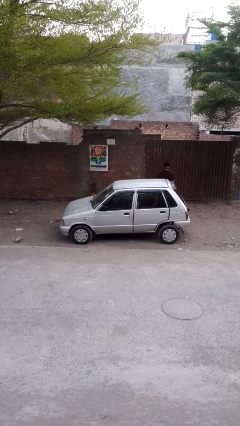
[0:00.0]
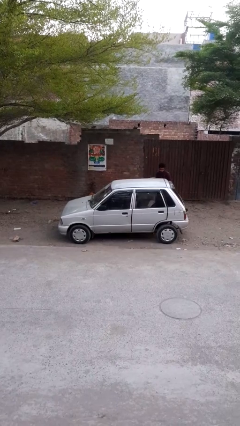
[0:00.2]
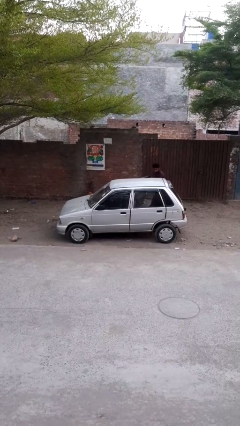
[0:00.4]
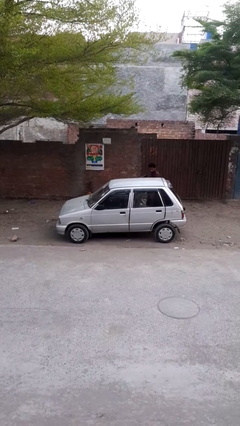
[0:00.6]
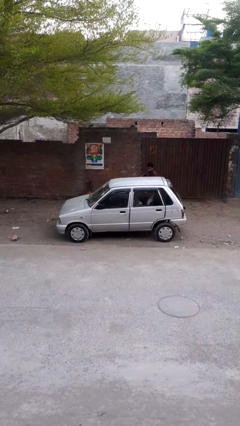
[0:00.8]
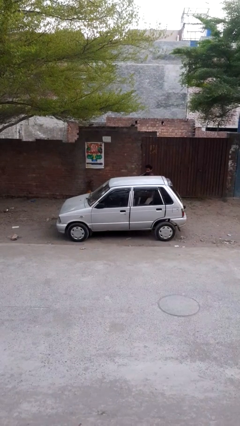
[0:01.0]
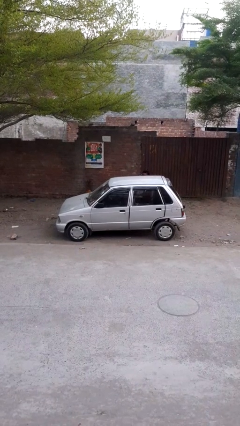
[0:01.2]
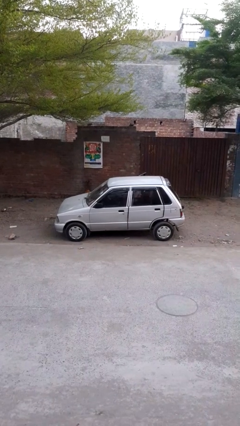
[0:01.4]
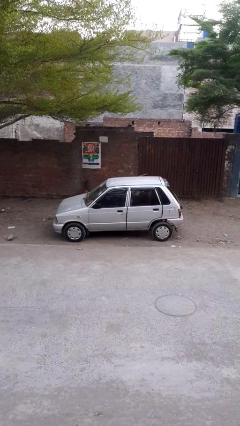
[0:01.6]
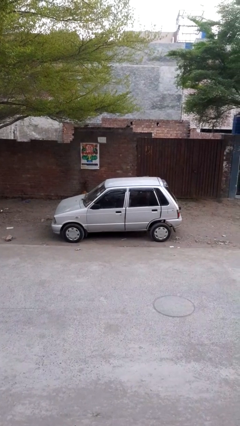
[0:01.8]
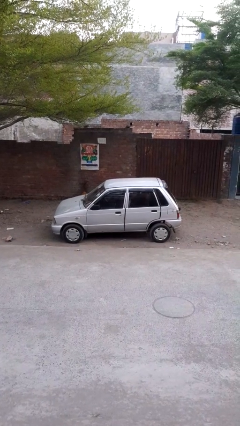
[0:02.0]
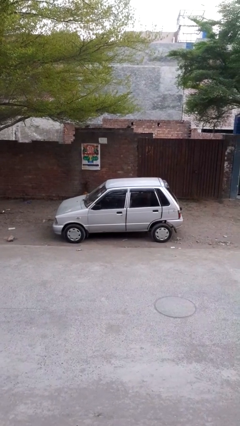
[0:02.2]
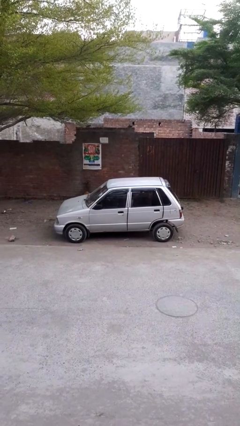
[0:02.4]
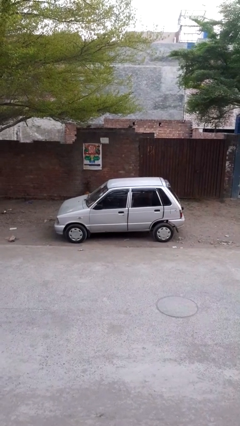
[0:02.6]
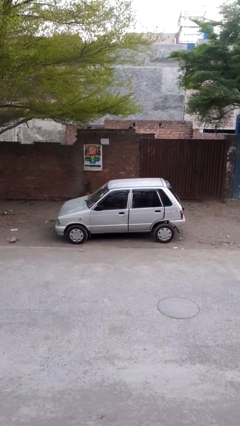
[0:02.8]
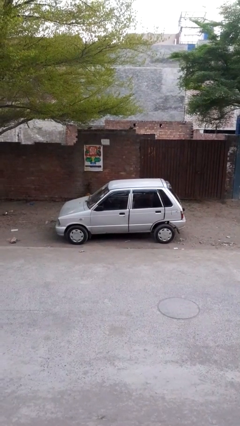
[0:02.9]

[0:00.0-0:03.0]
car picks up person

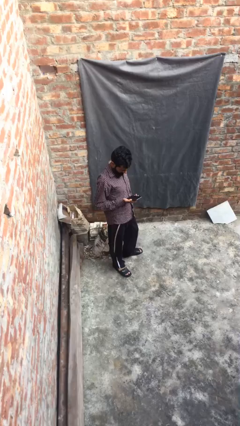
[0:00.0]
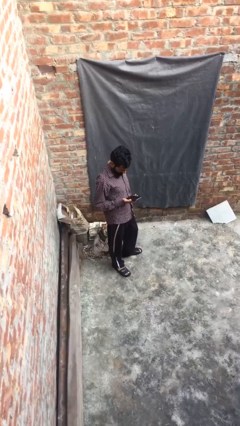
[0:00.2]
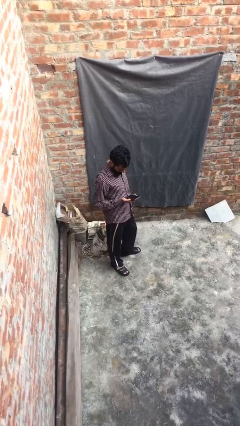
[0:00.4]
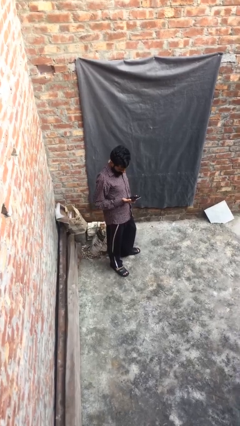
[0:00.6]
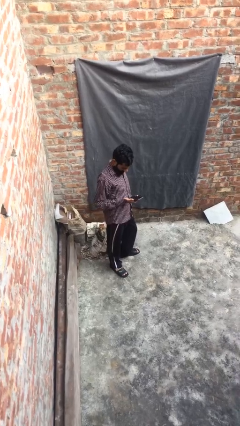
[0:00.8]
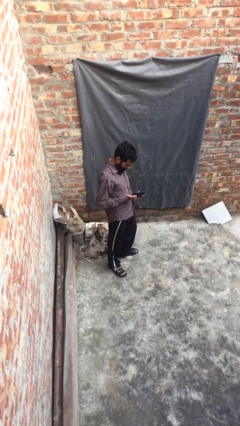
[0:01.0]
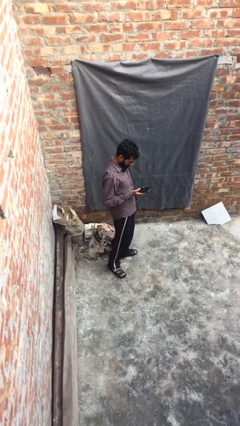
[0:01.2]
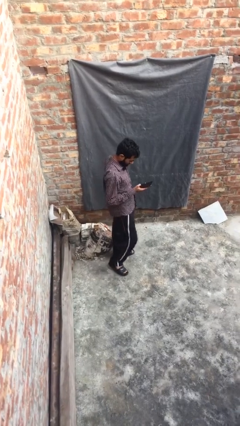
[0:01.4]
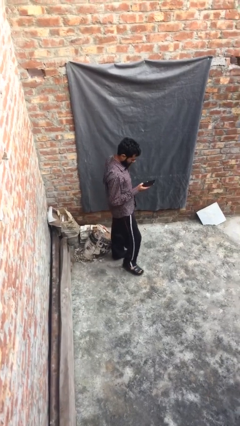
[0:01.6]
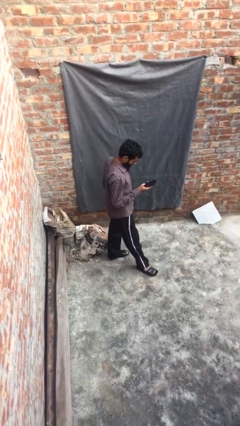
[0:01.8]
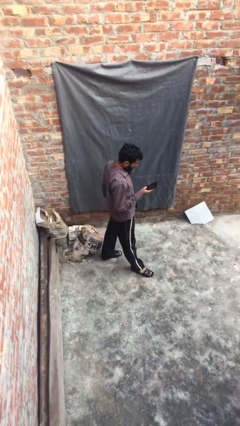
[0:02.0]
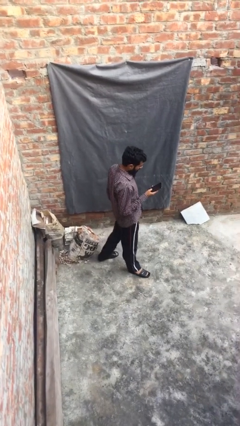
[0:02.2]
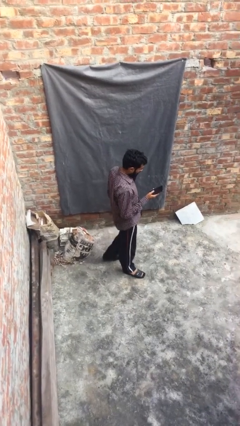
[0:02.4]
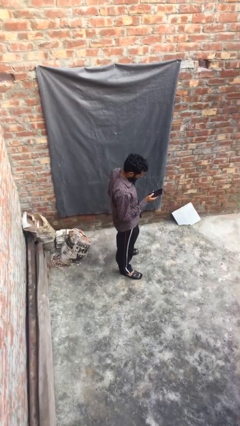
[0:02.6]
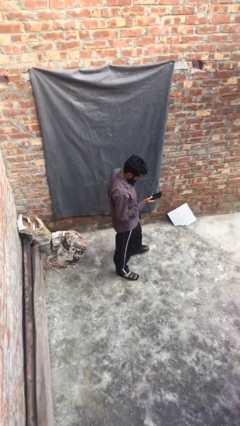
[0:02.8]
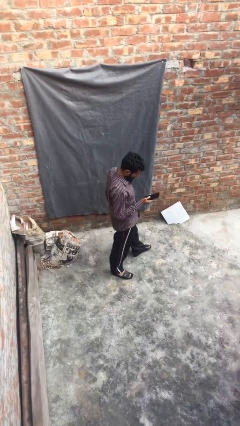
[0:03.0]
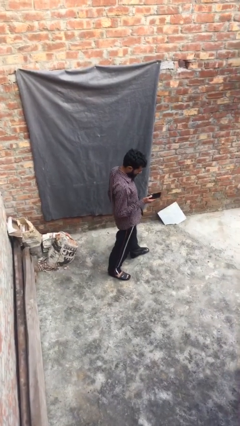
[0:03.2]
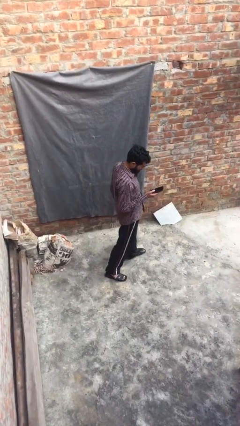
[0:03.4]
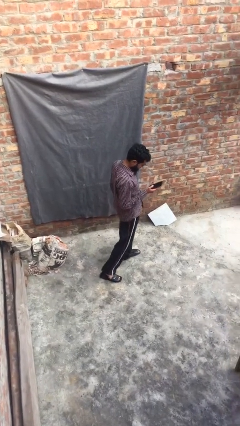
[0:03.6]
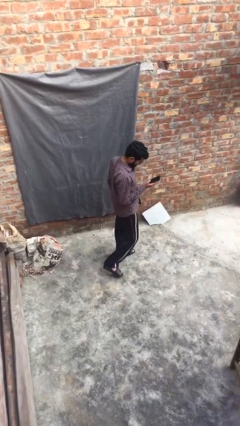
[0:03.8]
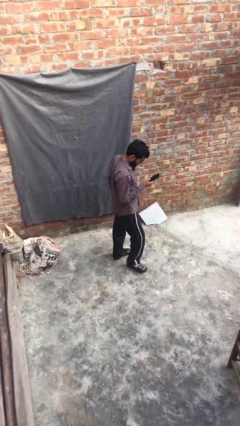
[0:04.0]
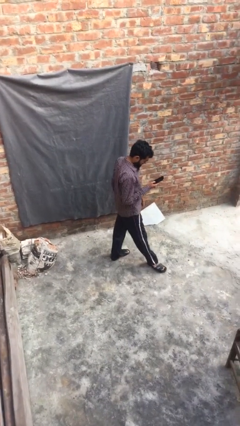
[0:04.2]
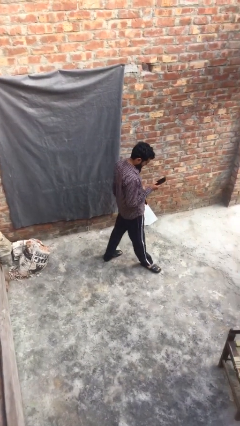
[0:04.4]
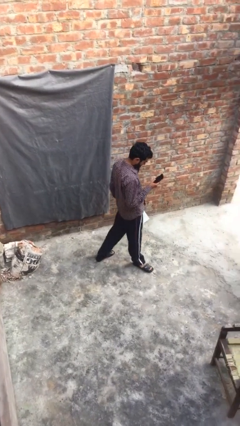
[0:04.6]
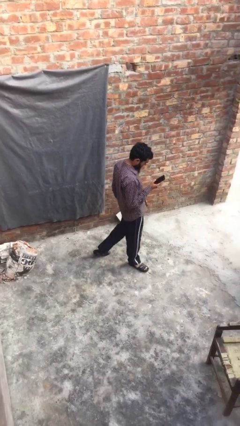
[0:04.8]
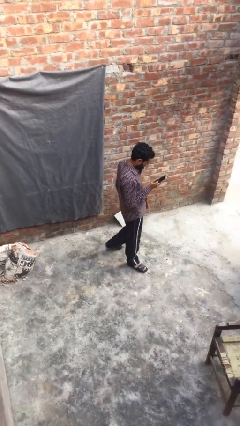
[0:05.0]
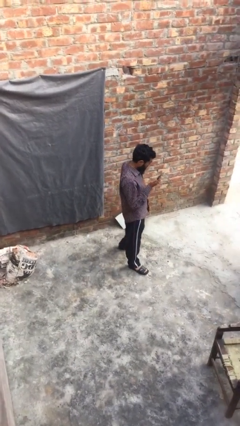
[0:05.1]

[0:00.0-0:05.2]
person texts on phone

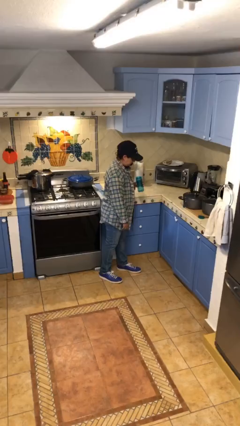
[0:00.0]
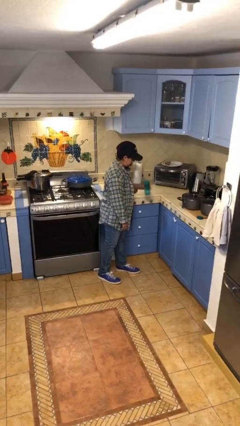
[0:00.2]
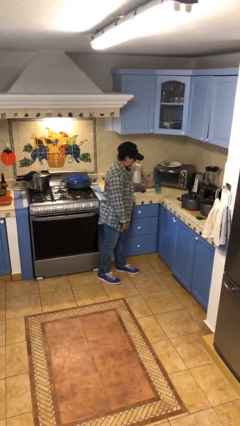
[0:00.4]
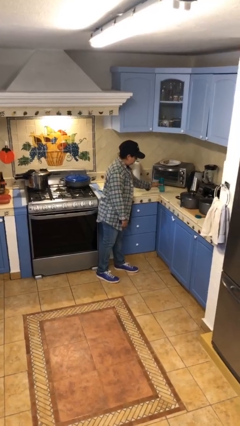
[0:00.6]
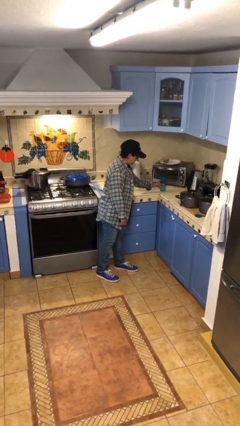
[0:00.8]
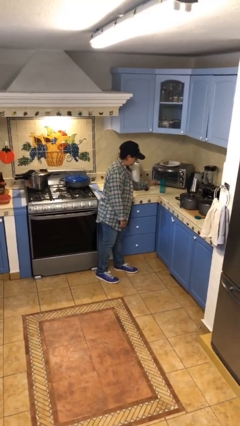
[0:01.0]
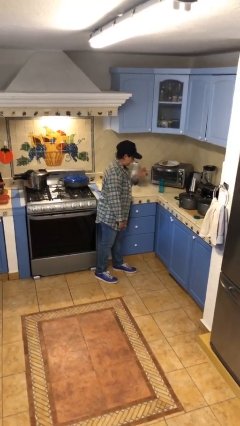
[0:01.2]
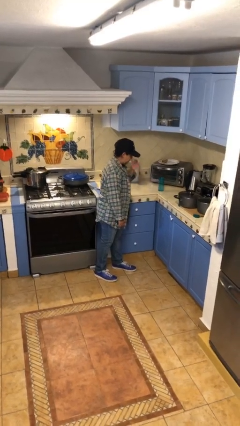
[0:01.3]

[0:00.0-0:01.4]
person puts down object on countertop

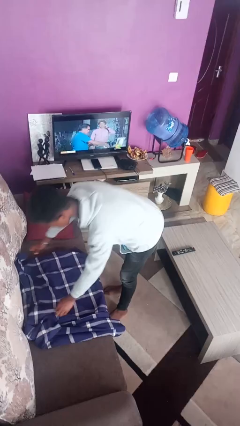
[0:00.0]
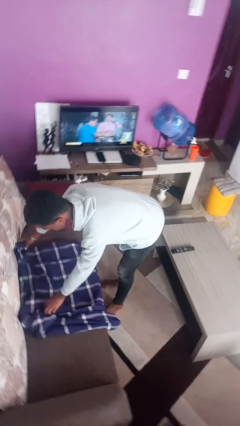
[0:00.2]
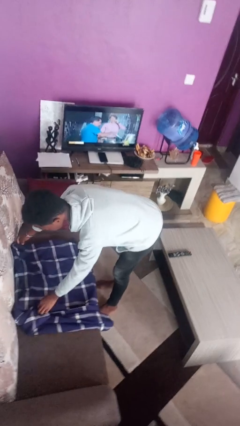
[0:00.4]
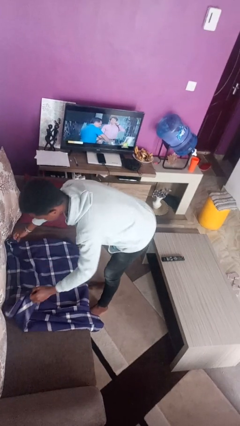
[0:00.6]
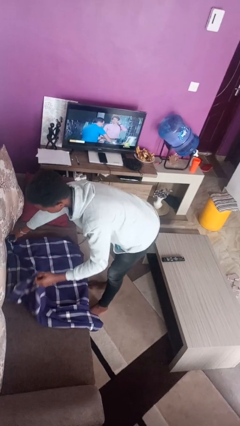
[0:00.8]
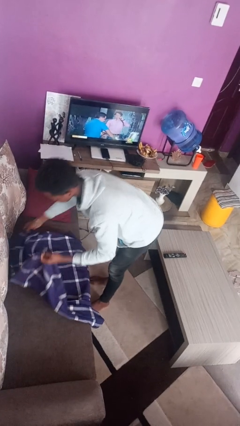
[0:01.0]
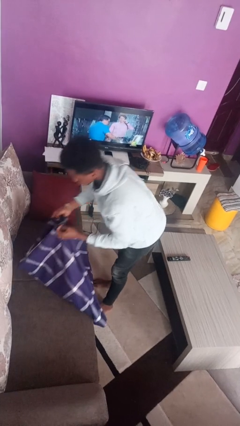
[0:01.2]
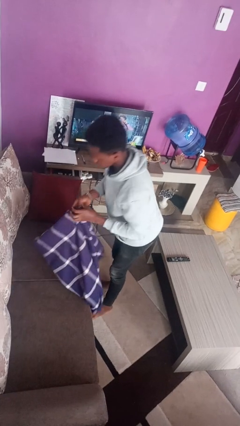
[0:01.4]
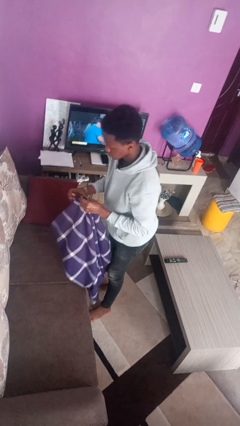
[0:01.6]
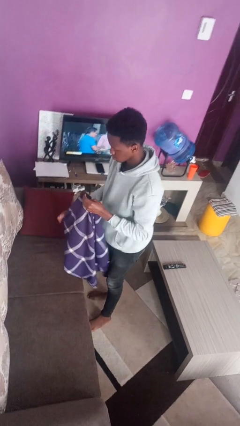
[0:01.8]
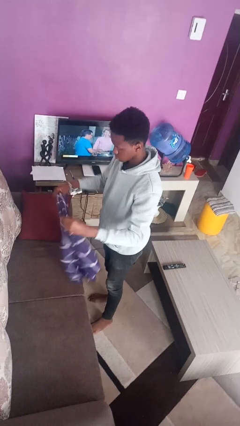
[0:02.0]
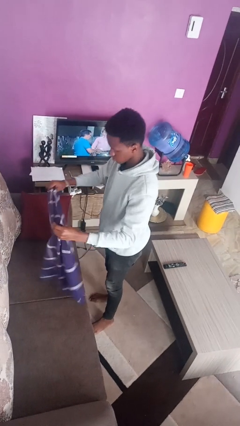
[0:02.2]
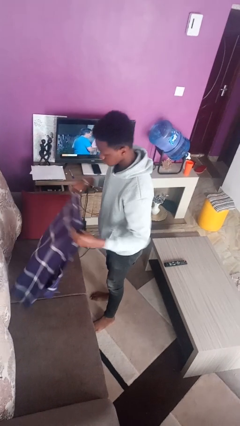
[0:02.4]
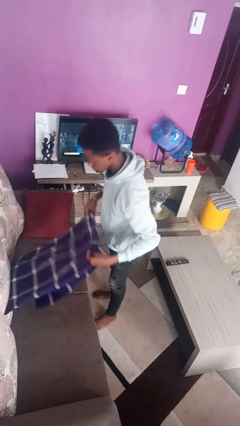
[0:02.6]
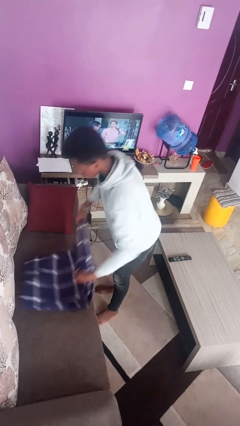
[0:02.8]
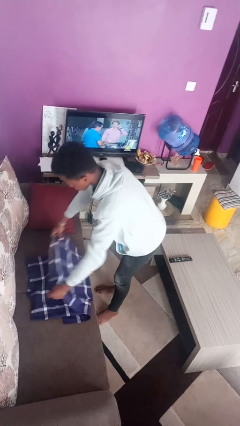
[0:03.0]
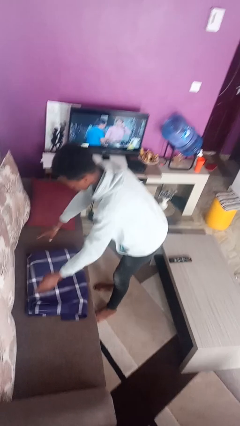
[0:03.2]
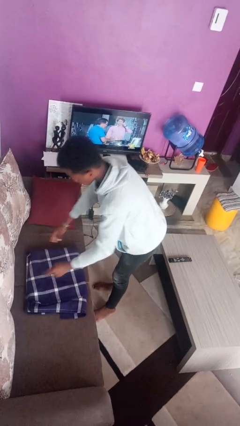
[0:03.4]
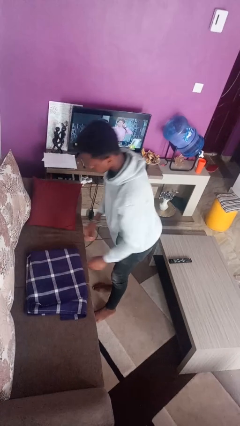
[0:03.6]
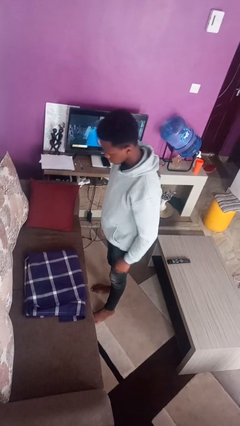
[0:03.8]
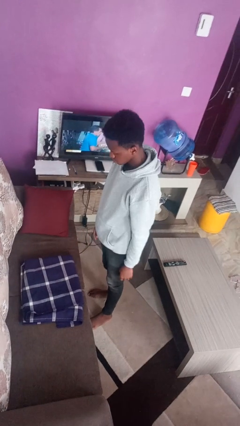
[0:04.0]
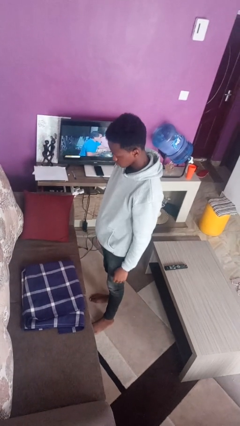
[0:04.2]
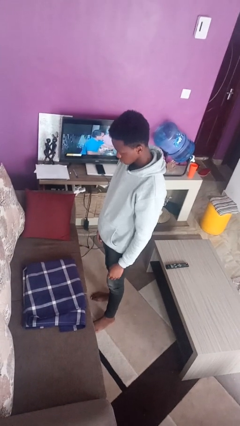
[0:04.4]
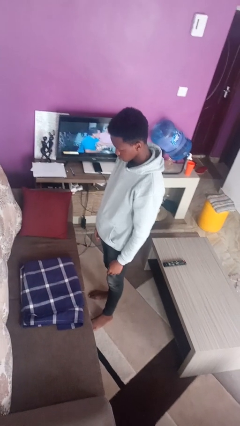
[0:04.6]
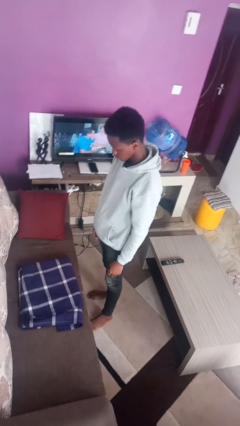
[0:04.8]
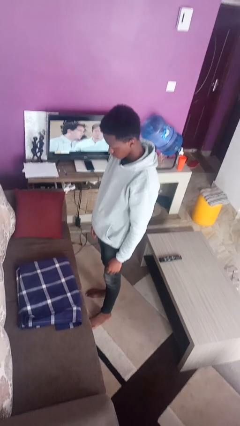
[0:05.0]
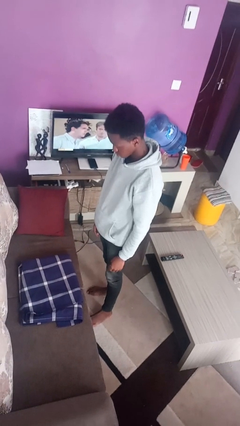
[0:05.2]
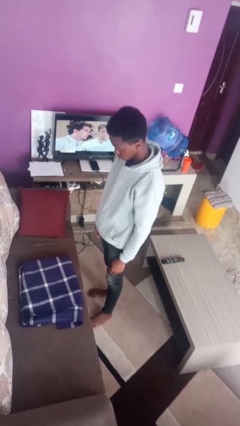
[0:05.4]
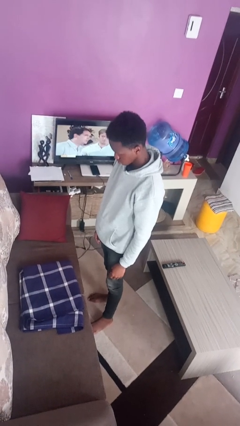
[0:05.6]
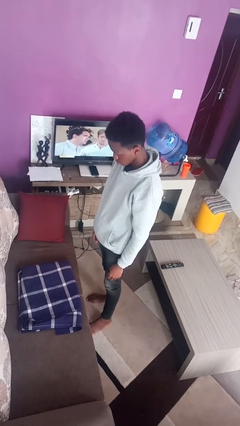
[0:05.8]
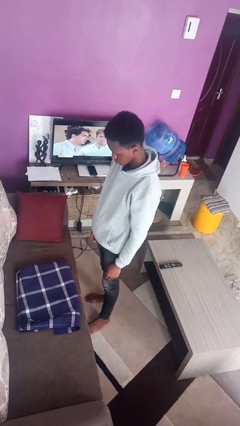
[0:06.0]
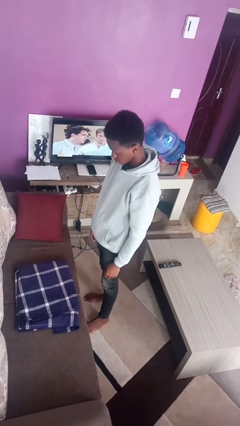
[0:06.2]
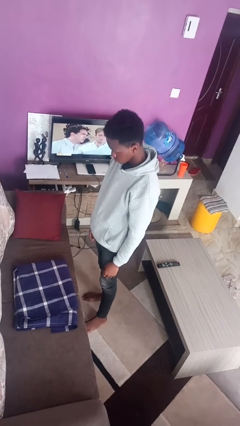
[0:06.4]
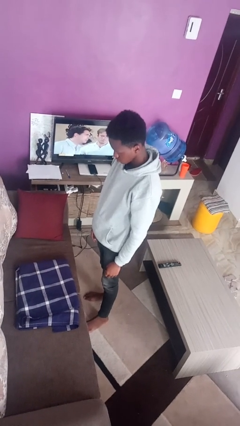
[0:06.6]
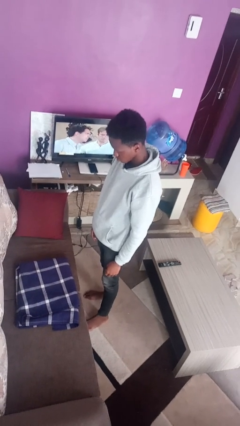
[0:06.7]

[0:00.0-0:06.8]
person folds blanket

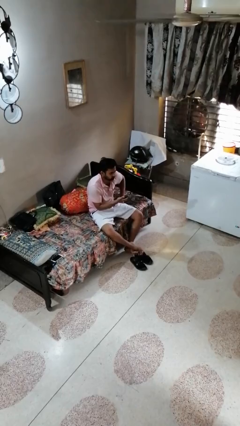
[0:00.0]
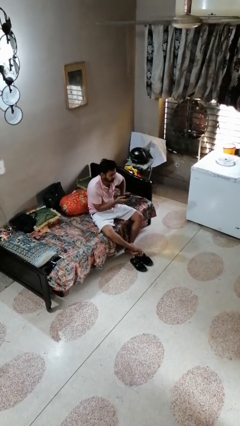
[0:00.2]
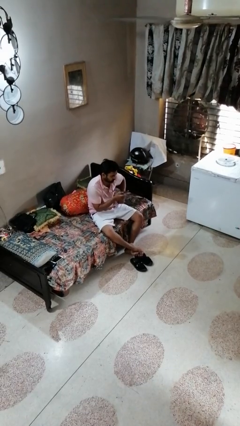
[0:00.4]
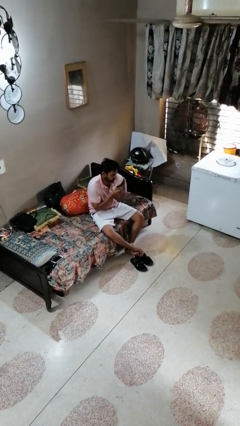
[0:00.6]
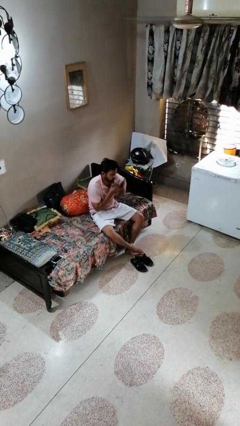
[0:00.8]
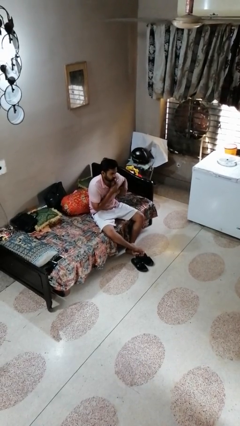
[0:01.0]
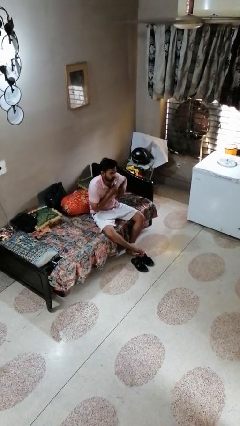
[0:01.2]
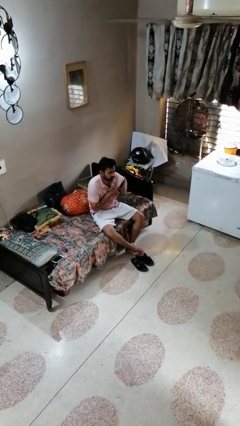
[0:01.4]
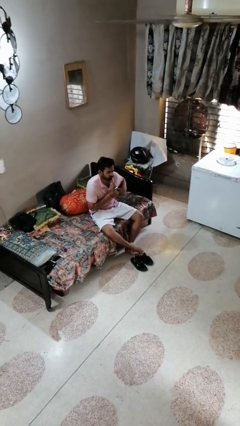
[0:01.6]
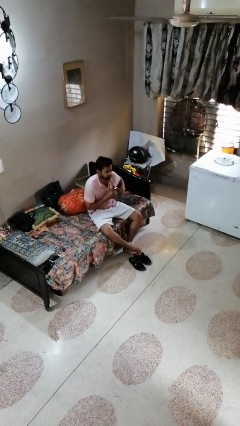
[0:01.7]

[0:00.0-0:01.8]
person puts phone into pocket
